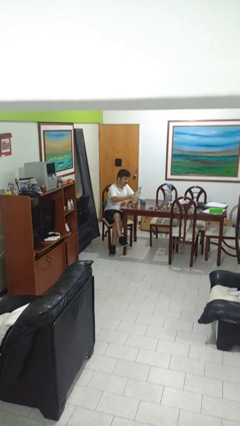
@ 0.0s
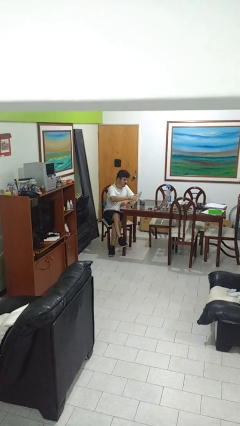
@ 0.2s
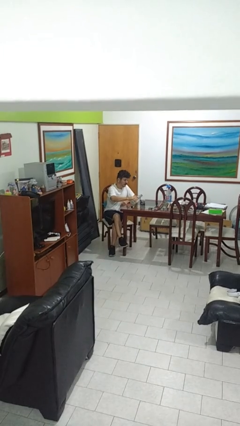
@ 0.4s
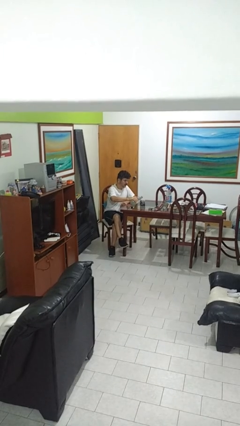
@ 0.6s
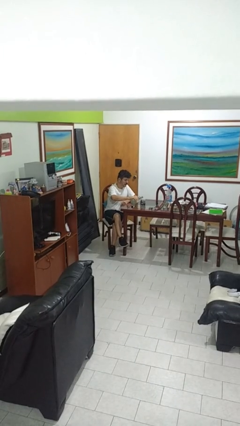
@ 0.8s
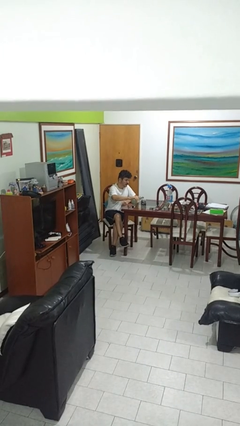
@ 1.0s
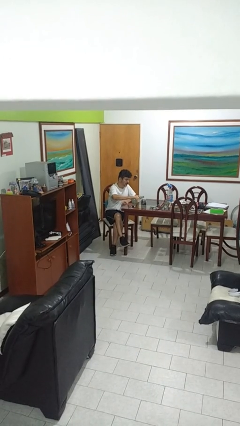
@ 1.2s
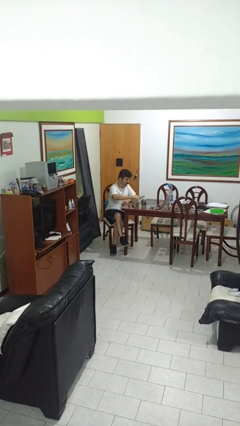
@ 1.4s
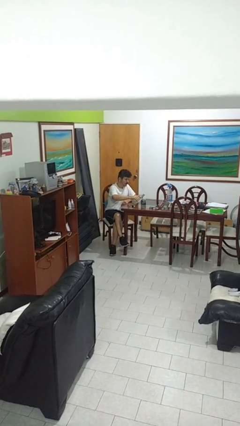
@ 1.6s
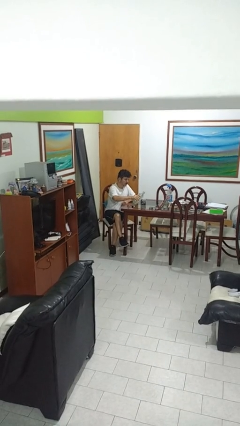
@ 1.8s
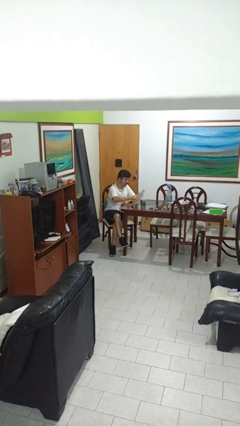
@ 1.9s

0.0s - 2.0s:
person pours liquid into cup

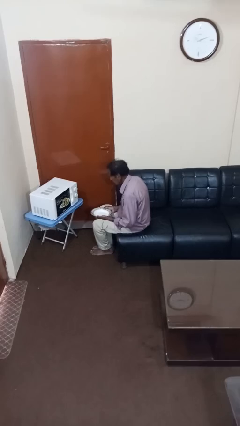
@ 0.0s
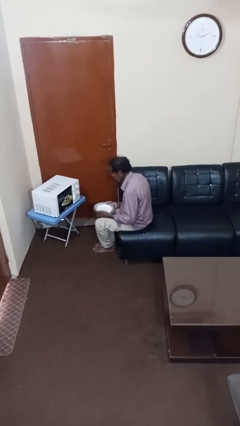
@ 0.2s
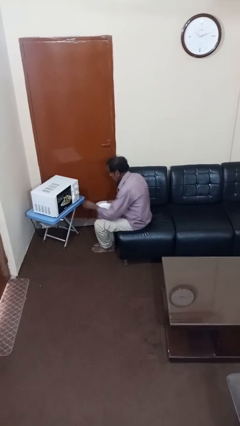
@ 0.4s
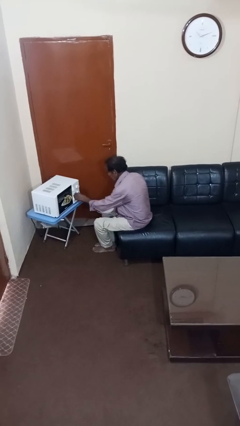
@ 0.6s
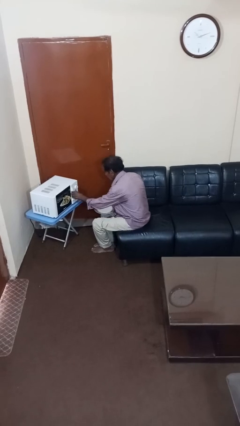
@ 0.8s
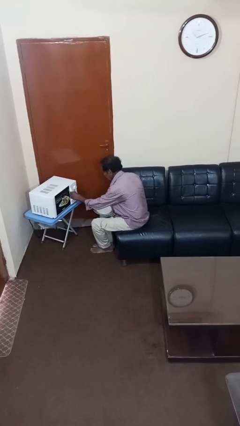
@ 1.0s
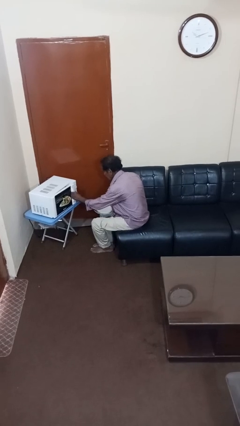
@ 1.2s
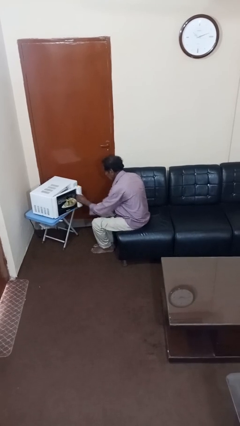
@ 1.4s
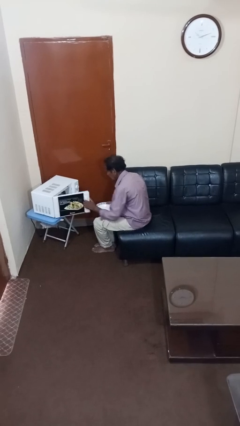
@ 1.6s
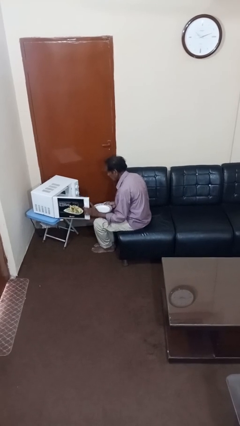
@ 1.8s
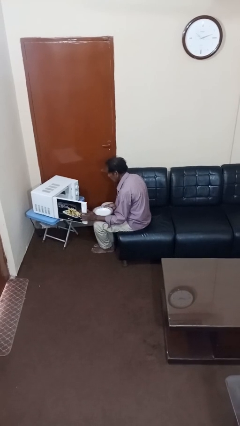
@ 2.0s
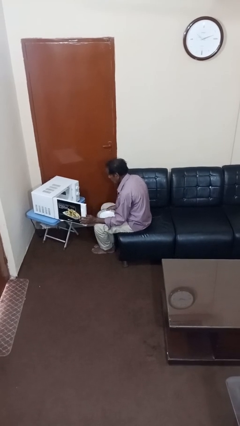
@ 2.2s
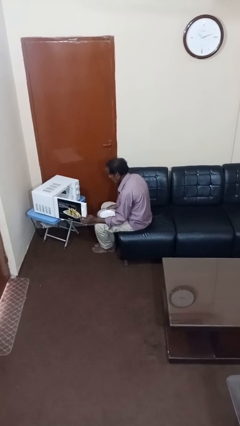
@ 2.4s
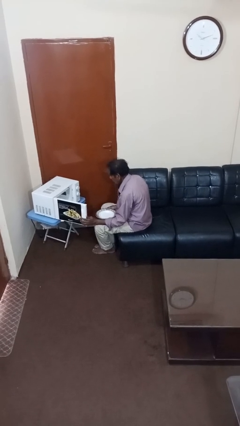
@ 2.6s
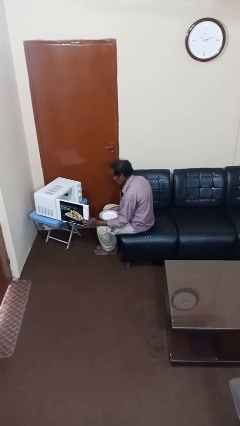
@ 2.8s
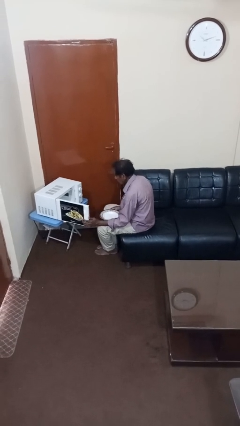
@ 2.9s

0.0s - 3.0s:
person opens microwave

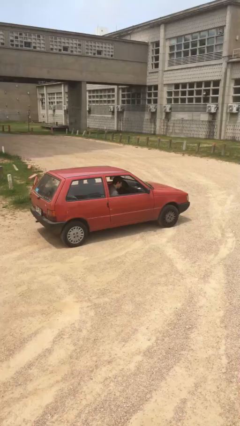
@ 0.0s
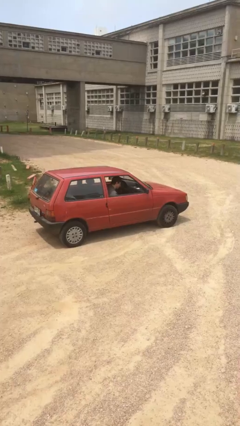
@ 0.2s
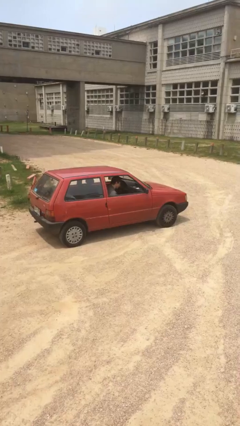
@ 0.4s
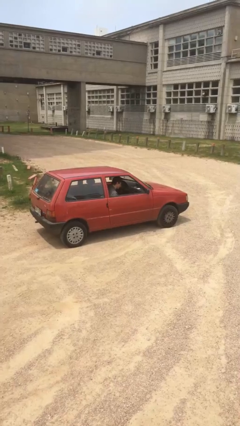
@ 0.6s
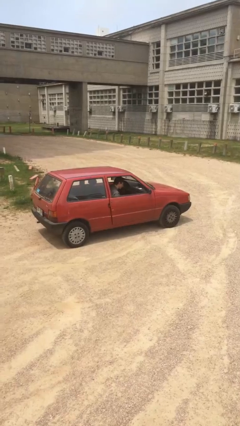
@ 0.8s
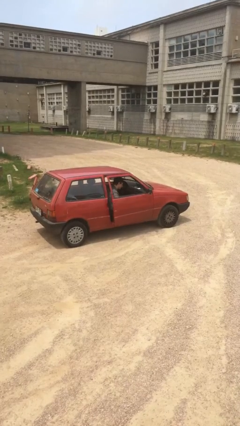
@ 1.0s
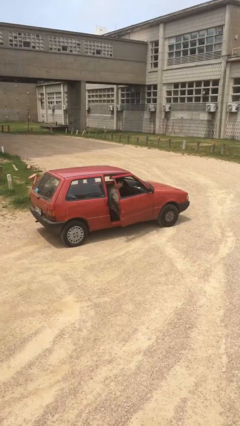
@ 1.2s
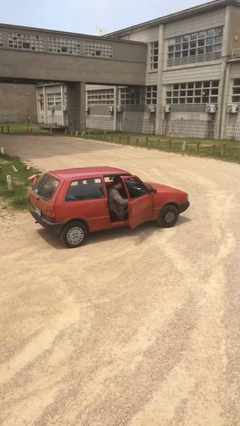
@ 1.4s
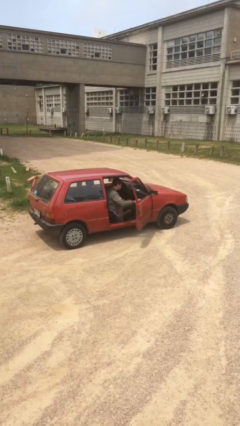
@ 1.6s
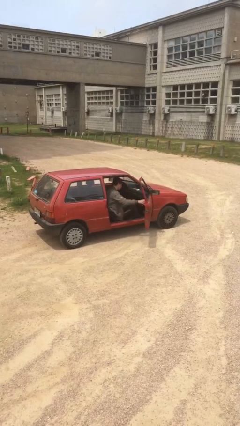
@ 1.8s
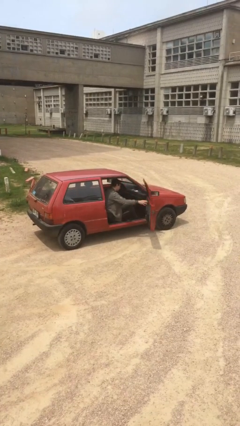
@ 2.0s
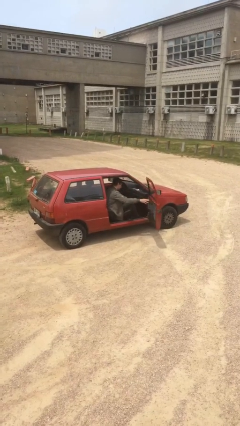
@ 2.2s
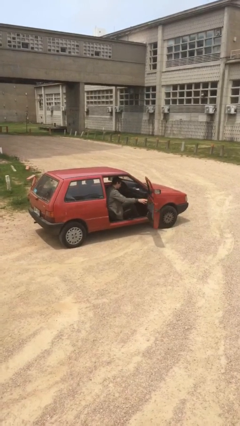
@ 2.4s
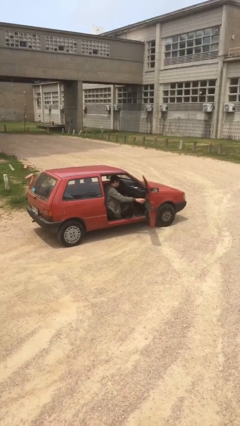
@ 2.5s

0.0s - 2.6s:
person opens car door

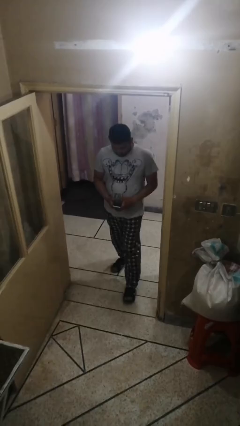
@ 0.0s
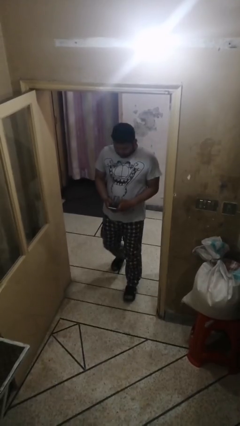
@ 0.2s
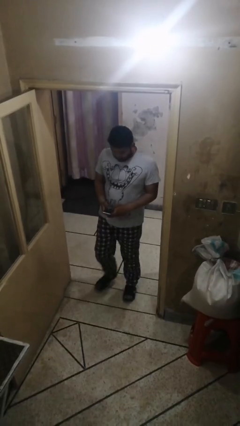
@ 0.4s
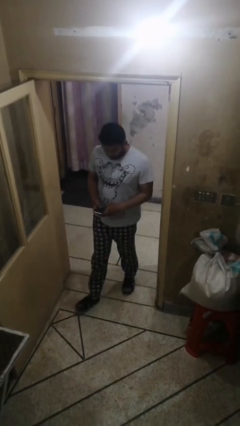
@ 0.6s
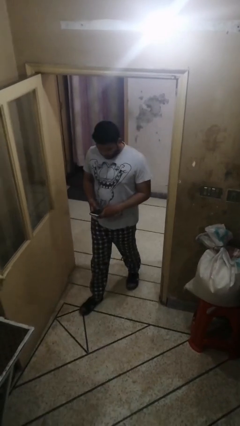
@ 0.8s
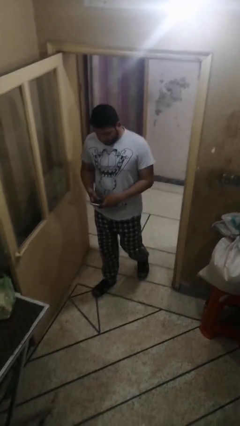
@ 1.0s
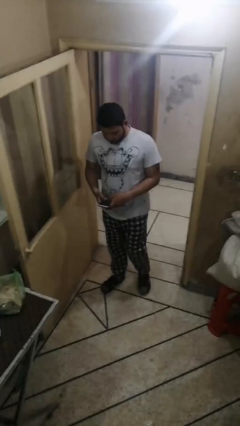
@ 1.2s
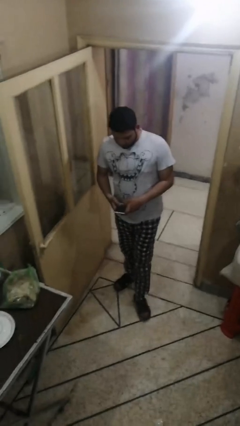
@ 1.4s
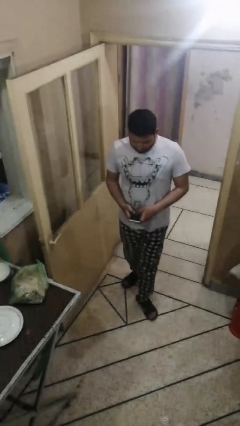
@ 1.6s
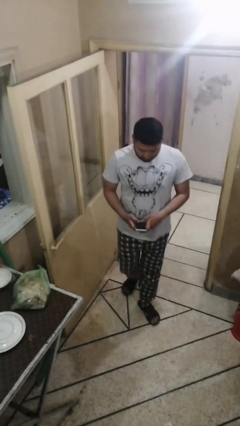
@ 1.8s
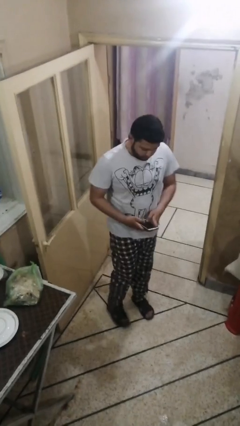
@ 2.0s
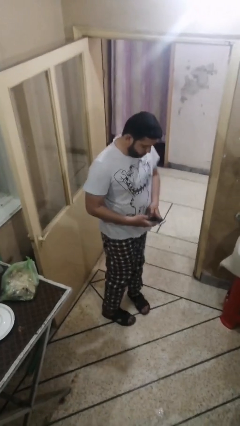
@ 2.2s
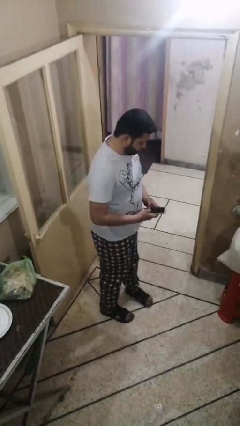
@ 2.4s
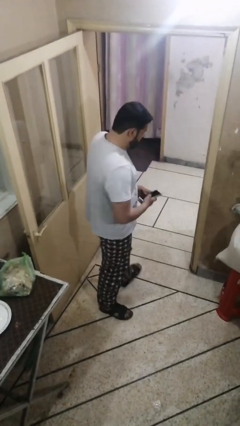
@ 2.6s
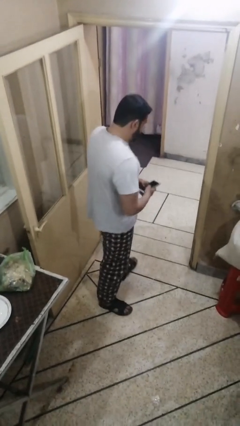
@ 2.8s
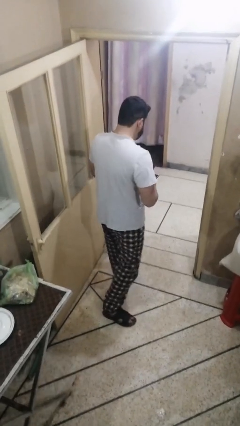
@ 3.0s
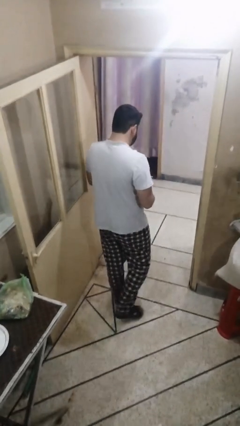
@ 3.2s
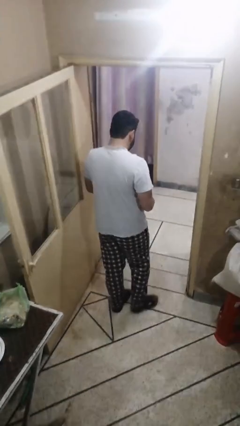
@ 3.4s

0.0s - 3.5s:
person enters scene through structure

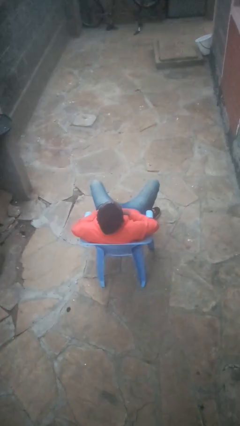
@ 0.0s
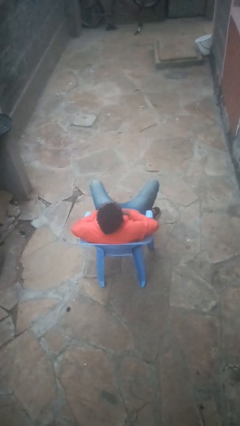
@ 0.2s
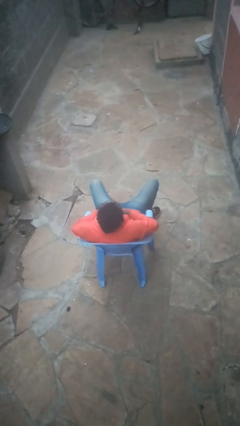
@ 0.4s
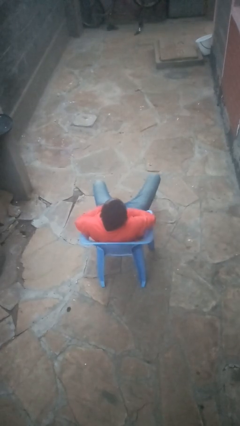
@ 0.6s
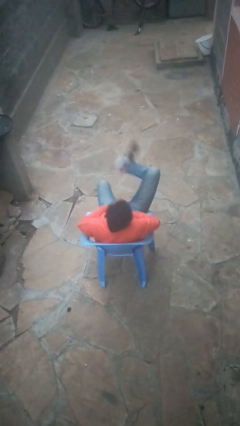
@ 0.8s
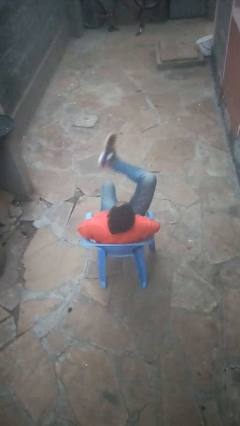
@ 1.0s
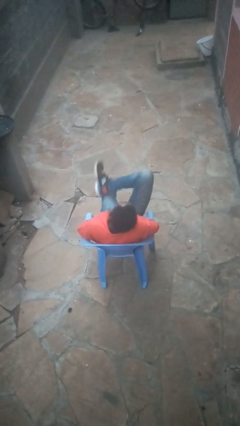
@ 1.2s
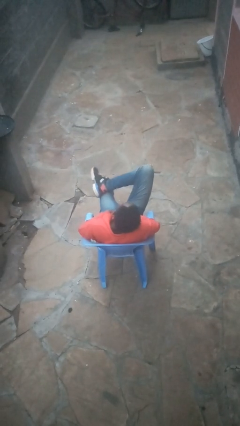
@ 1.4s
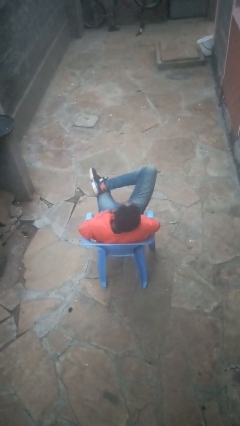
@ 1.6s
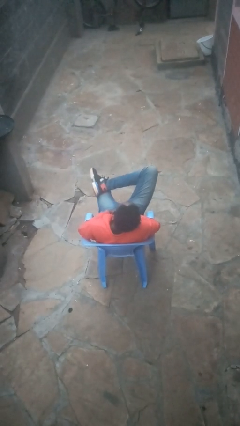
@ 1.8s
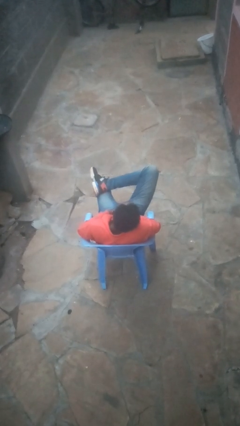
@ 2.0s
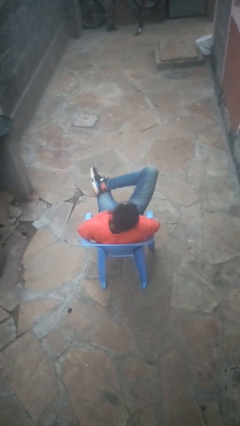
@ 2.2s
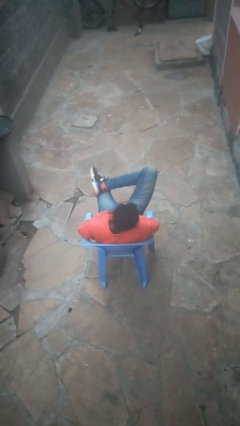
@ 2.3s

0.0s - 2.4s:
person crosses legs

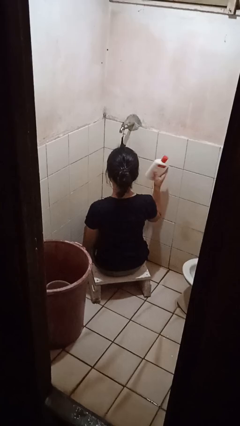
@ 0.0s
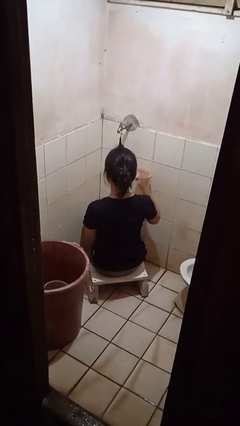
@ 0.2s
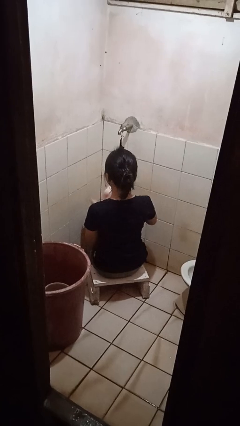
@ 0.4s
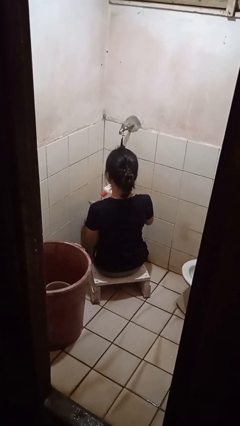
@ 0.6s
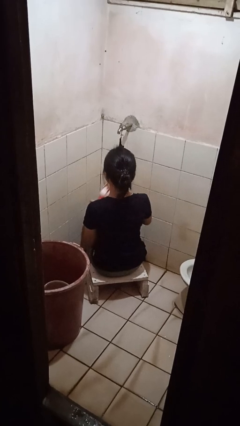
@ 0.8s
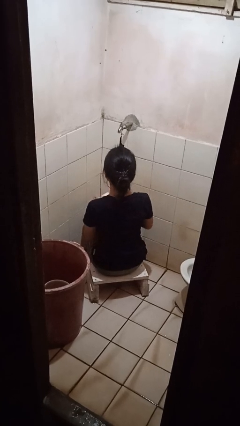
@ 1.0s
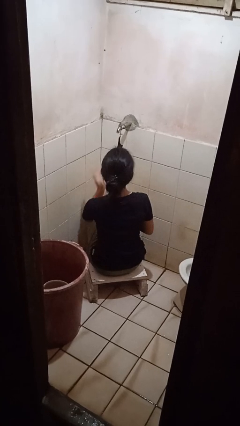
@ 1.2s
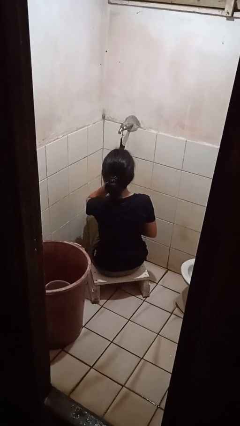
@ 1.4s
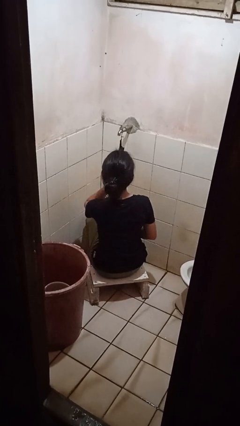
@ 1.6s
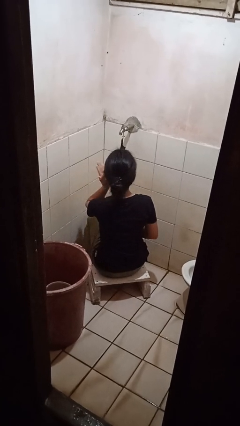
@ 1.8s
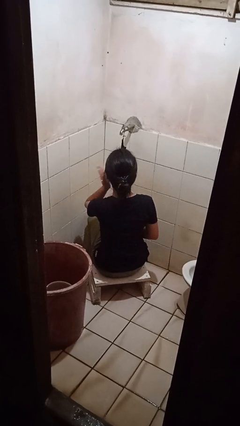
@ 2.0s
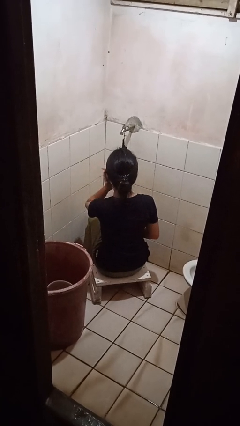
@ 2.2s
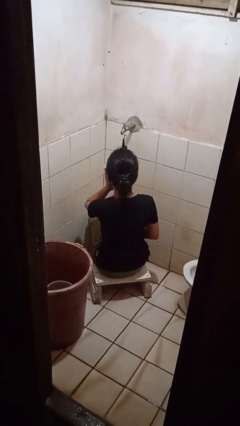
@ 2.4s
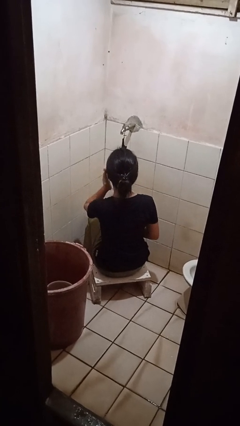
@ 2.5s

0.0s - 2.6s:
person applies facial moisturizer

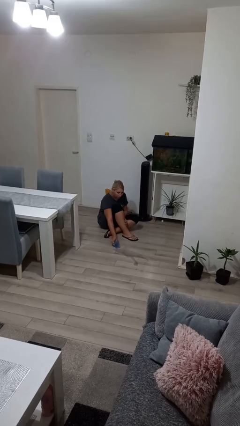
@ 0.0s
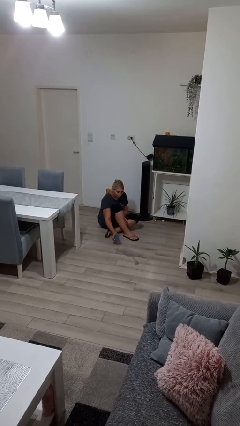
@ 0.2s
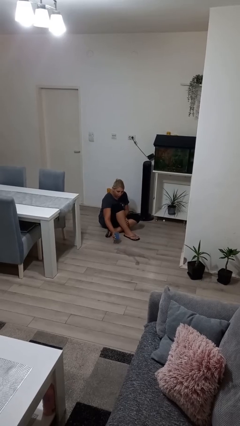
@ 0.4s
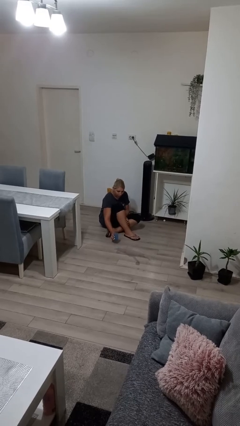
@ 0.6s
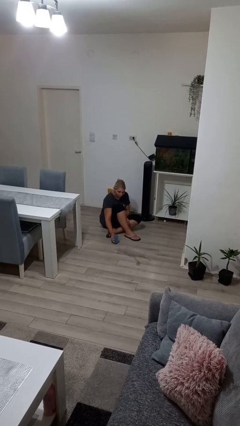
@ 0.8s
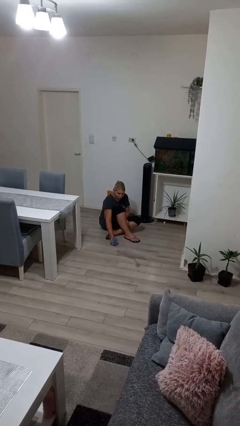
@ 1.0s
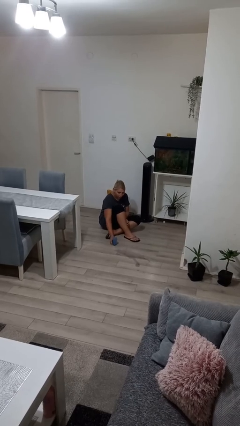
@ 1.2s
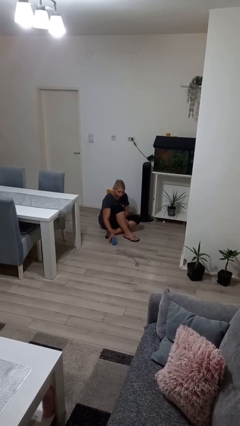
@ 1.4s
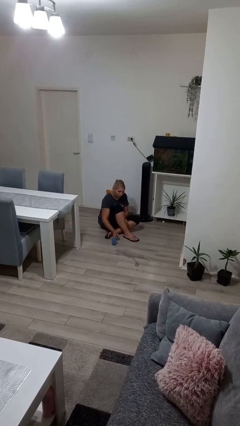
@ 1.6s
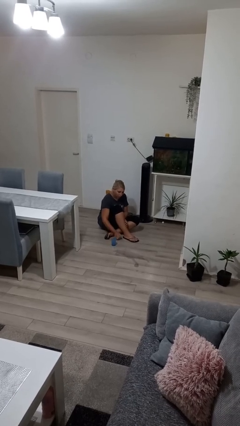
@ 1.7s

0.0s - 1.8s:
person sets upright glass
